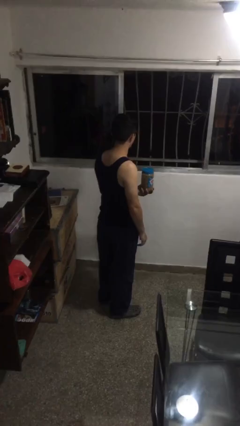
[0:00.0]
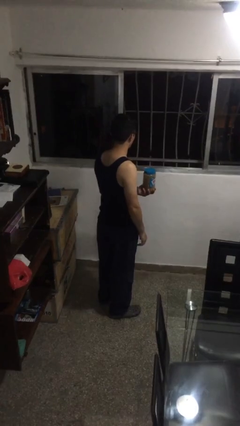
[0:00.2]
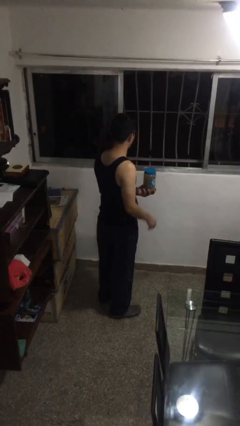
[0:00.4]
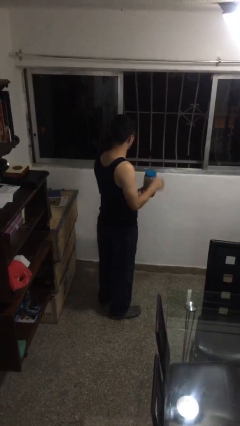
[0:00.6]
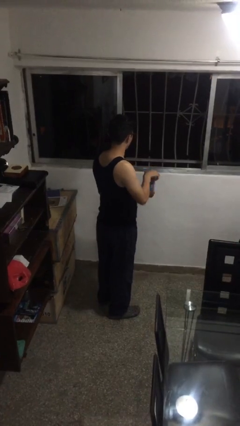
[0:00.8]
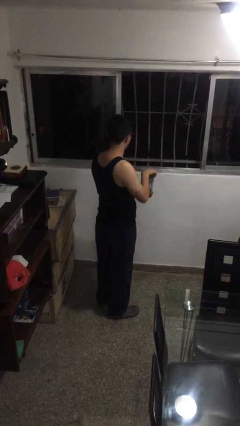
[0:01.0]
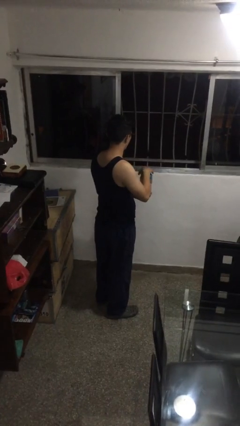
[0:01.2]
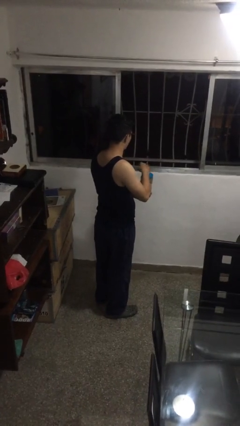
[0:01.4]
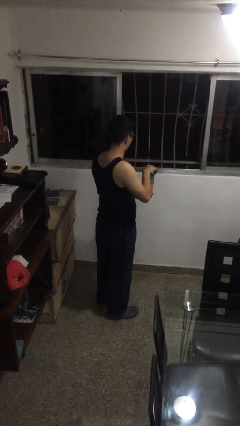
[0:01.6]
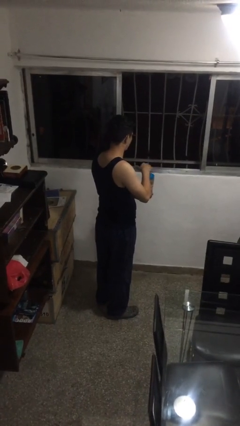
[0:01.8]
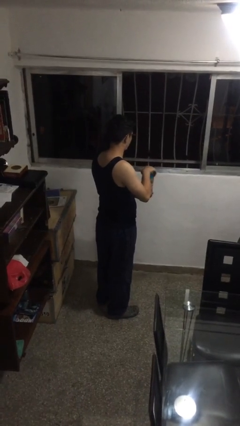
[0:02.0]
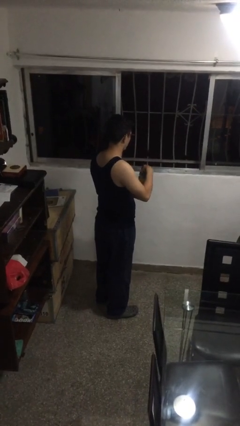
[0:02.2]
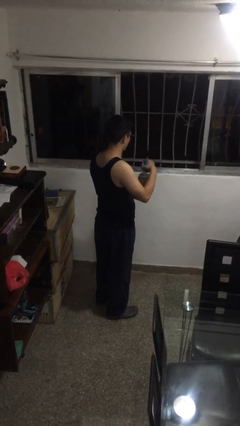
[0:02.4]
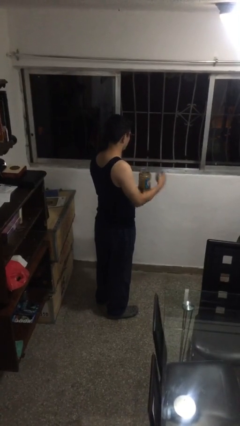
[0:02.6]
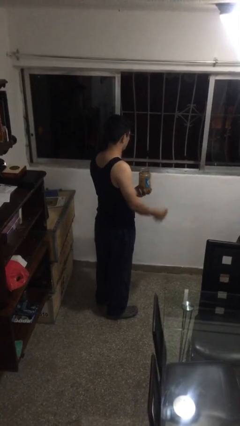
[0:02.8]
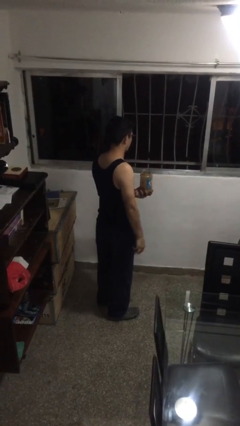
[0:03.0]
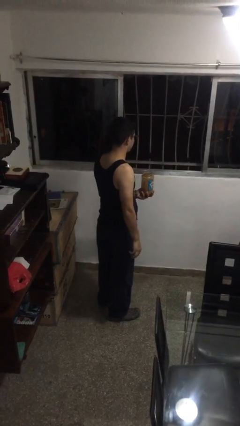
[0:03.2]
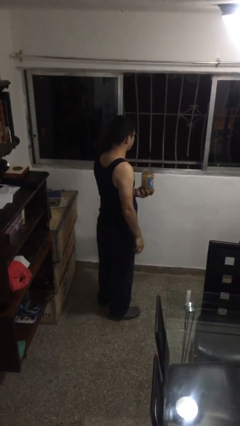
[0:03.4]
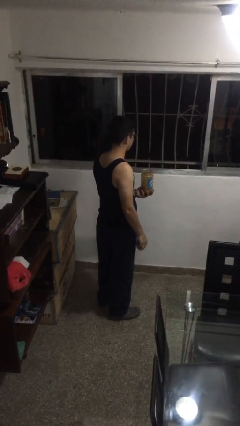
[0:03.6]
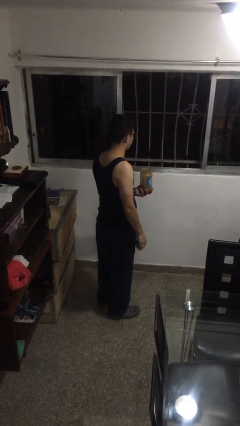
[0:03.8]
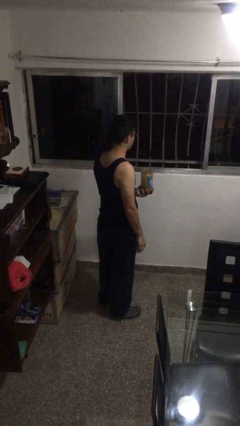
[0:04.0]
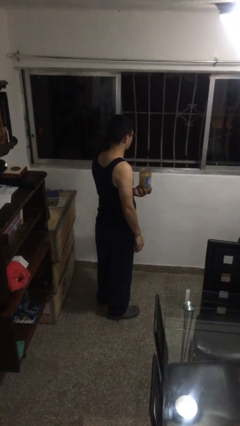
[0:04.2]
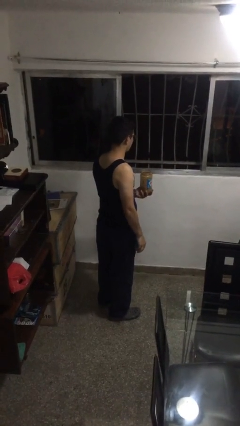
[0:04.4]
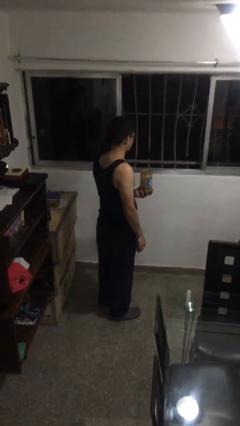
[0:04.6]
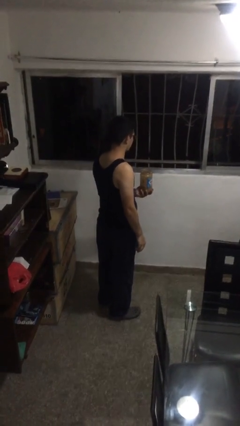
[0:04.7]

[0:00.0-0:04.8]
person opens jar

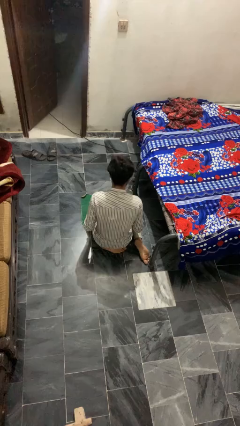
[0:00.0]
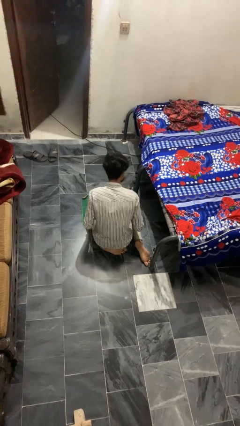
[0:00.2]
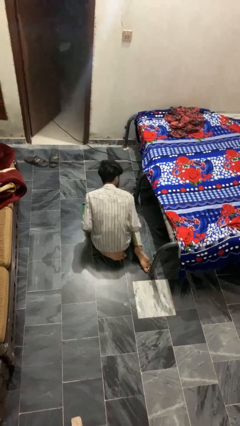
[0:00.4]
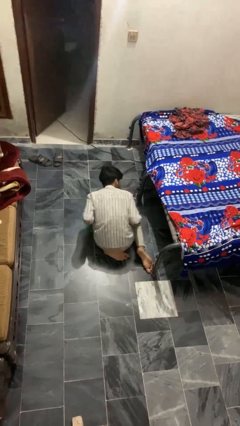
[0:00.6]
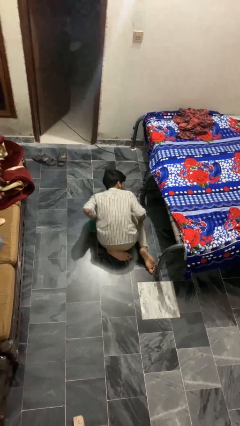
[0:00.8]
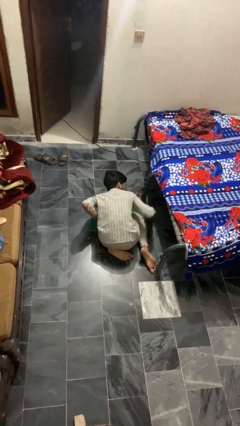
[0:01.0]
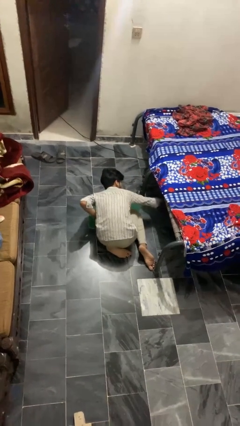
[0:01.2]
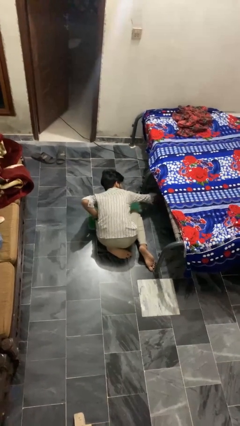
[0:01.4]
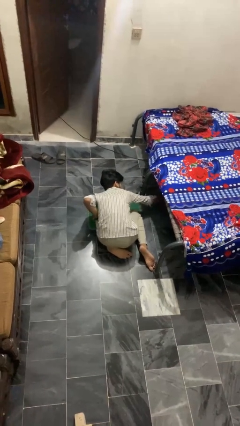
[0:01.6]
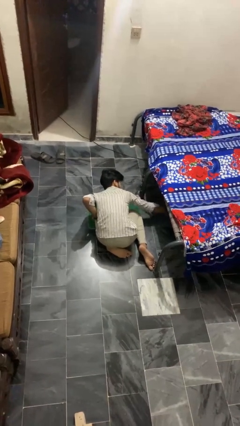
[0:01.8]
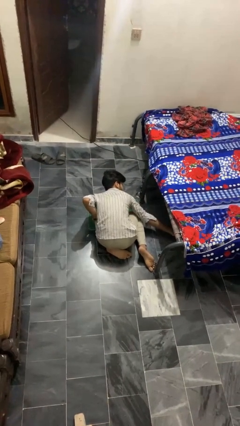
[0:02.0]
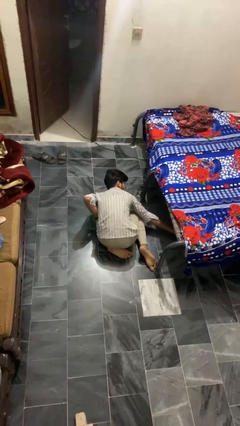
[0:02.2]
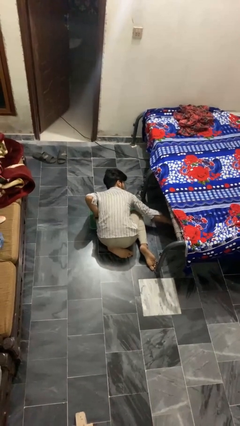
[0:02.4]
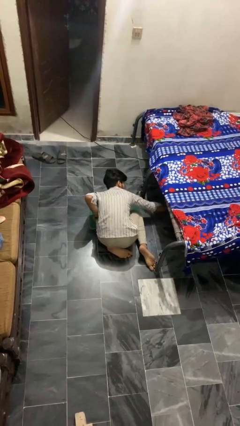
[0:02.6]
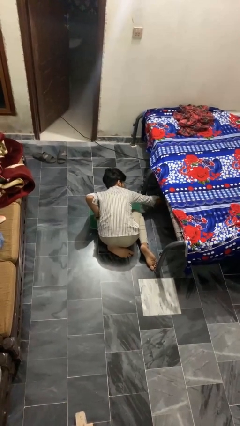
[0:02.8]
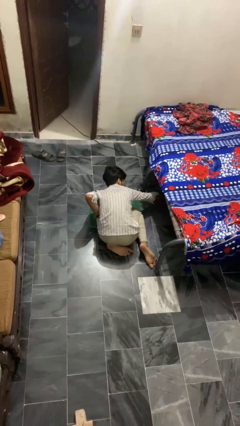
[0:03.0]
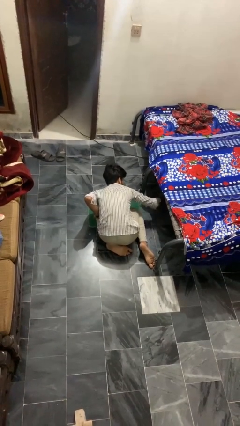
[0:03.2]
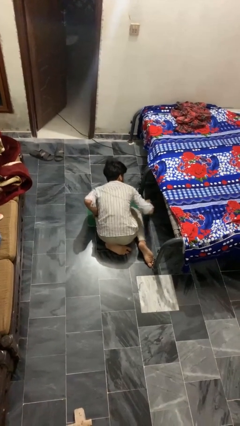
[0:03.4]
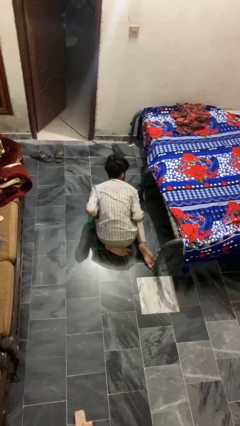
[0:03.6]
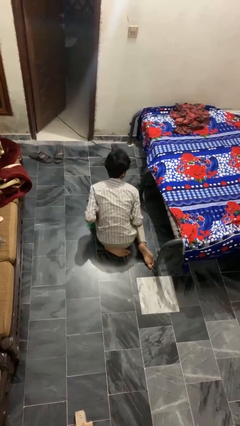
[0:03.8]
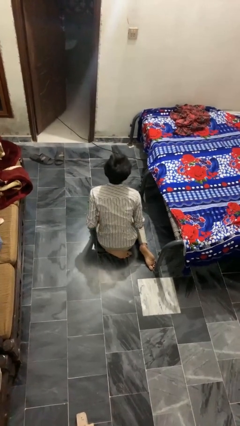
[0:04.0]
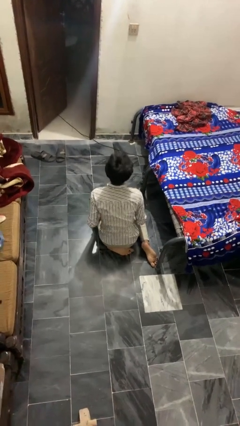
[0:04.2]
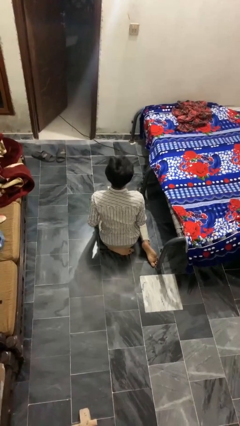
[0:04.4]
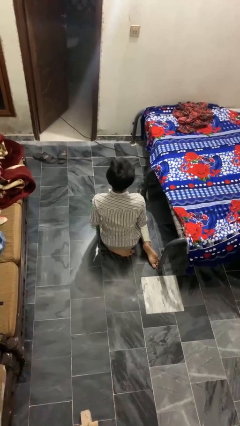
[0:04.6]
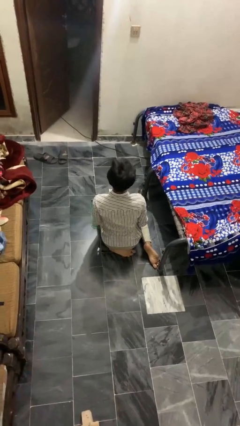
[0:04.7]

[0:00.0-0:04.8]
person searches under bed

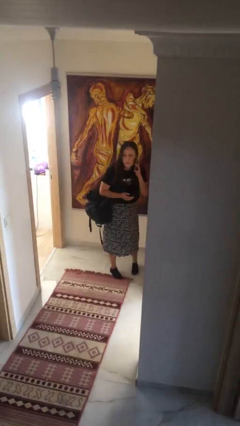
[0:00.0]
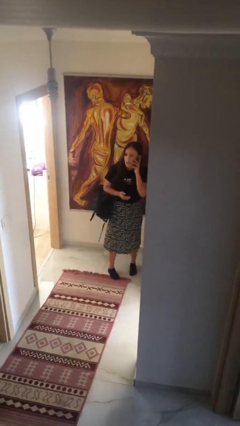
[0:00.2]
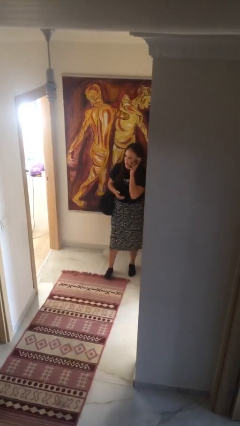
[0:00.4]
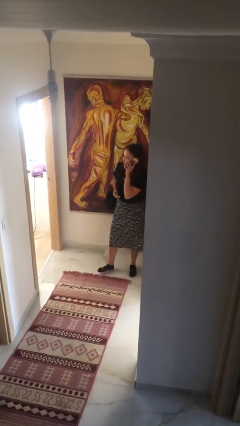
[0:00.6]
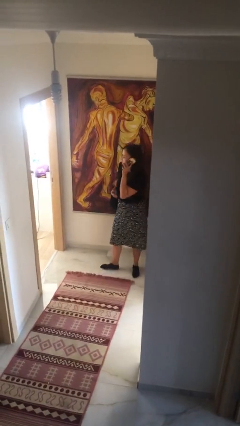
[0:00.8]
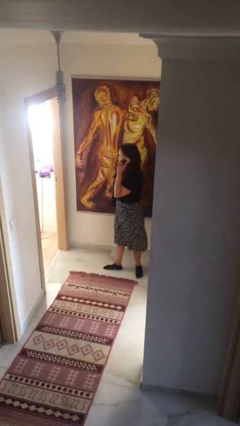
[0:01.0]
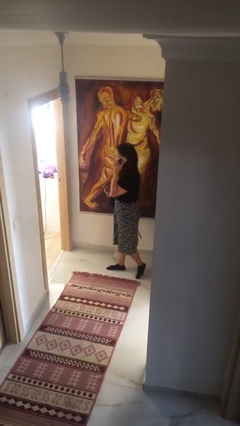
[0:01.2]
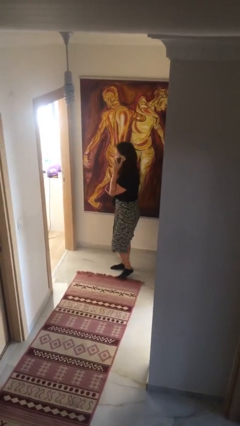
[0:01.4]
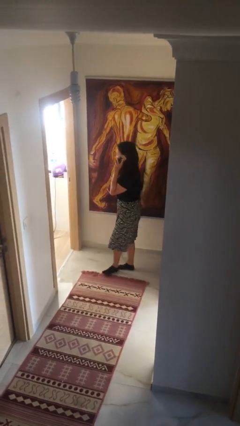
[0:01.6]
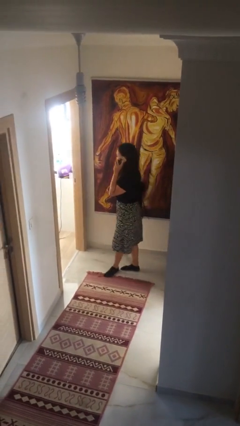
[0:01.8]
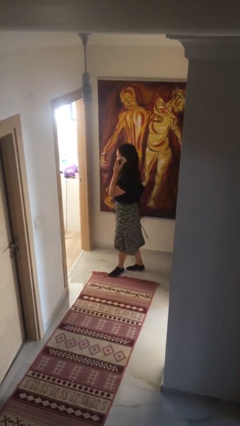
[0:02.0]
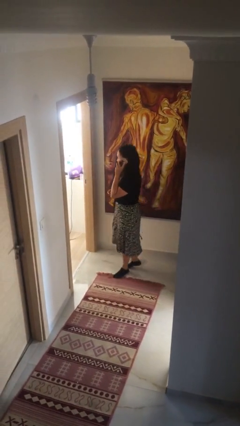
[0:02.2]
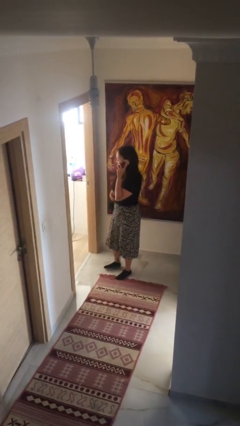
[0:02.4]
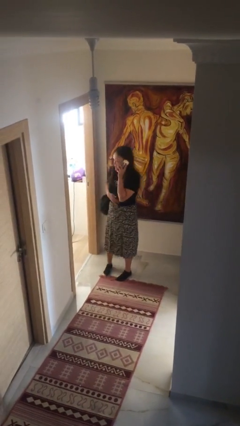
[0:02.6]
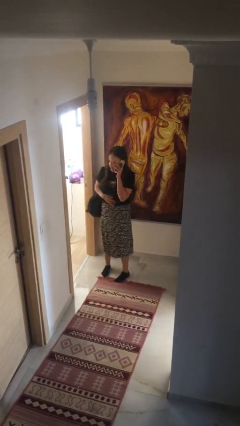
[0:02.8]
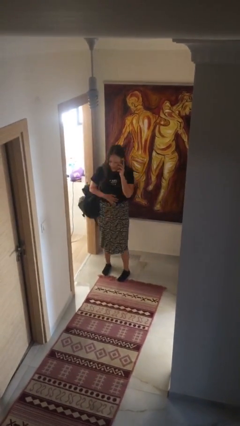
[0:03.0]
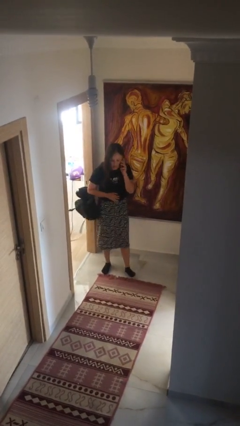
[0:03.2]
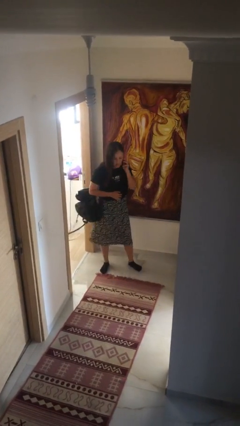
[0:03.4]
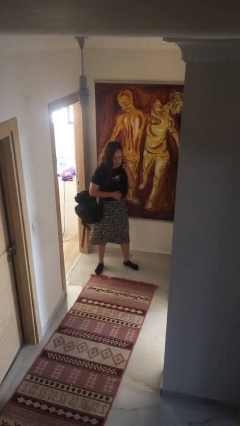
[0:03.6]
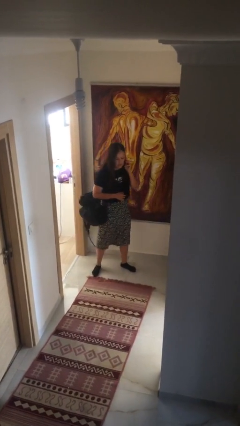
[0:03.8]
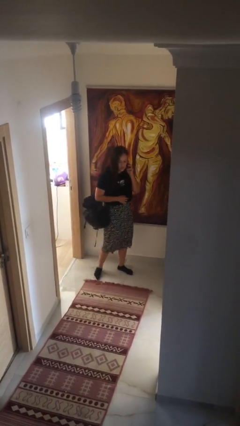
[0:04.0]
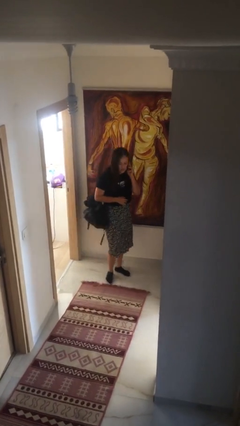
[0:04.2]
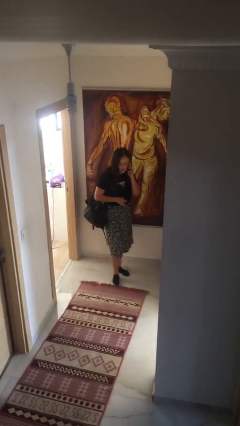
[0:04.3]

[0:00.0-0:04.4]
person talks on phone

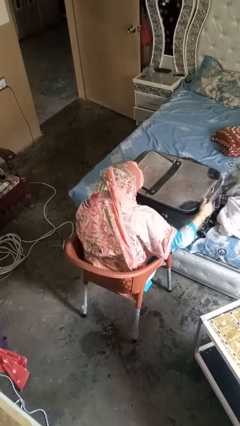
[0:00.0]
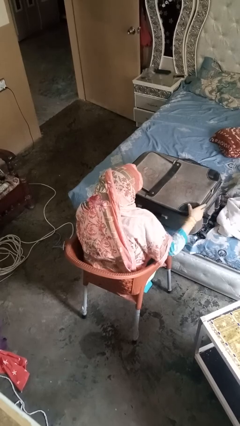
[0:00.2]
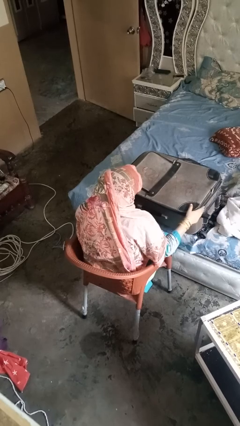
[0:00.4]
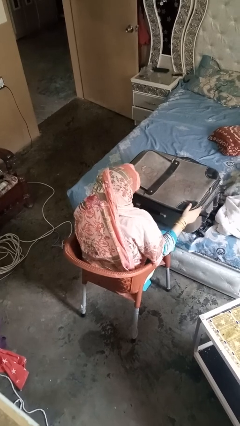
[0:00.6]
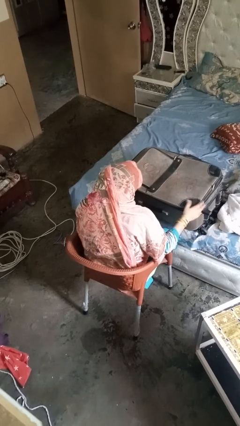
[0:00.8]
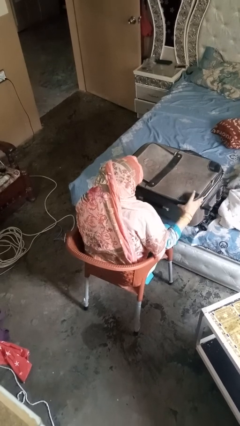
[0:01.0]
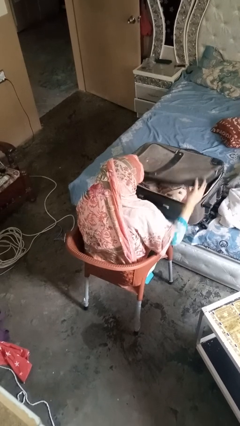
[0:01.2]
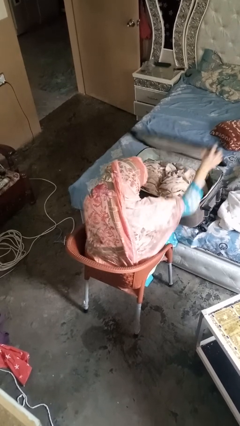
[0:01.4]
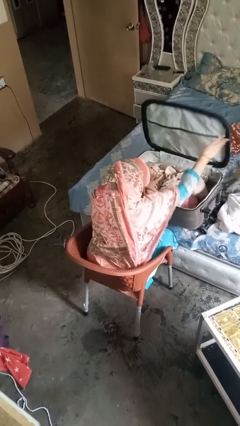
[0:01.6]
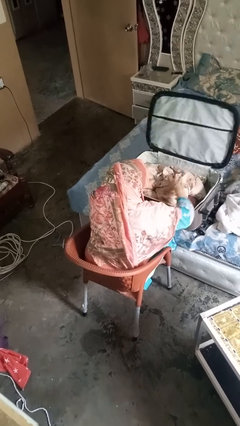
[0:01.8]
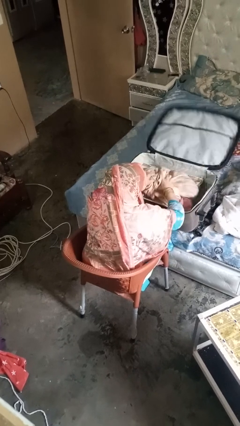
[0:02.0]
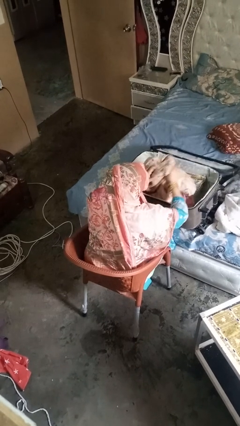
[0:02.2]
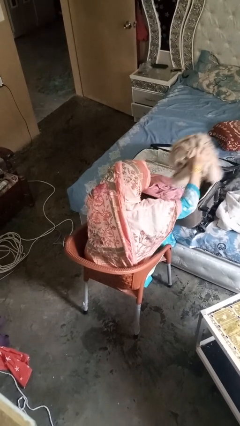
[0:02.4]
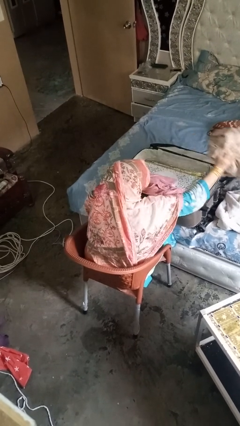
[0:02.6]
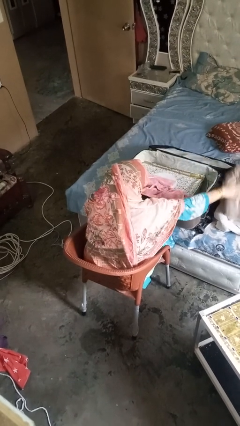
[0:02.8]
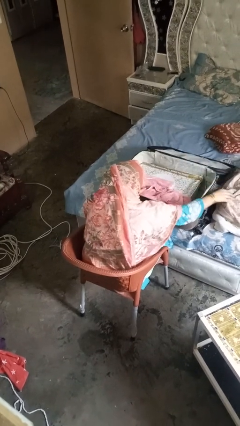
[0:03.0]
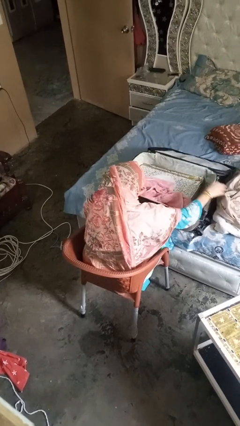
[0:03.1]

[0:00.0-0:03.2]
person unloads clothes from suitcase

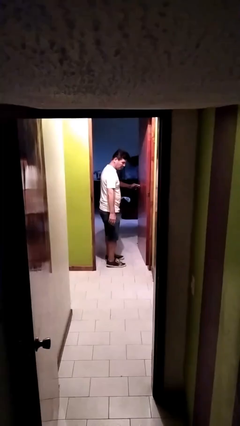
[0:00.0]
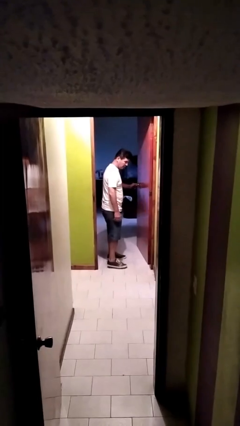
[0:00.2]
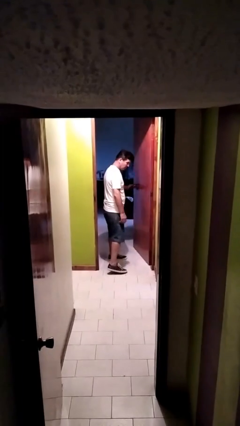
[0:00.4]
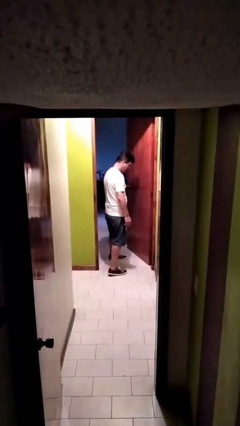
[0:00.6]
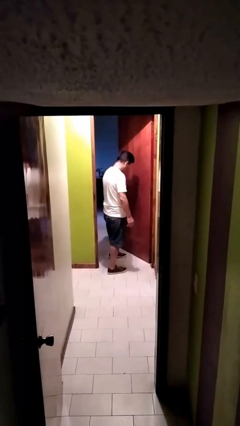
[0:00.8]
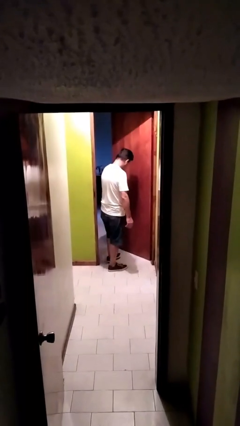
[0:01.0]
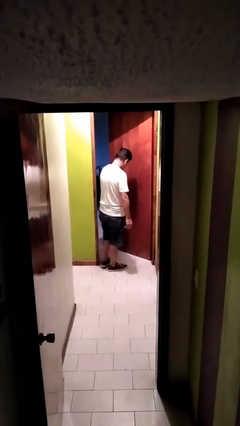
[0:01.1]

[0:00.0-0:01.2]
person closes facility door
